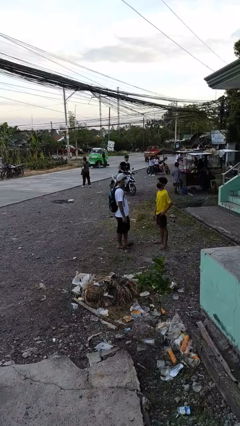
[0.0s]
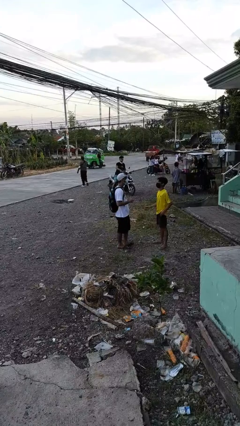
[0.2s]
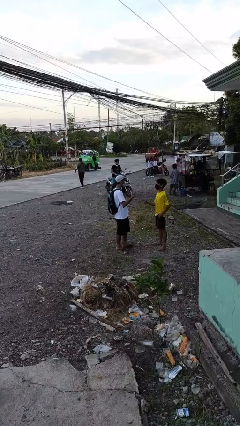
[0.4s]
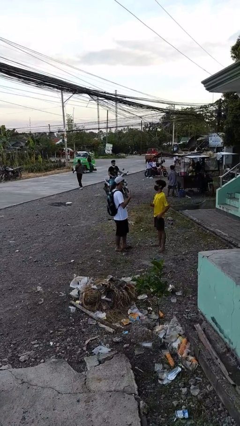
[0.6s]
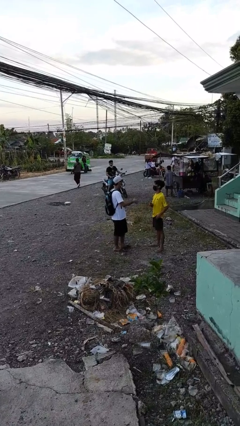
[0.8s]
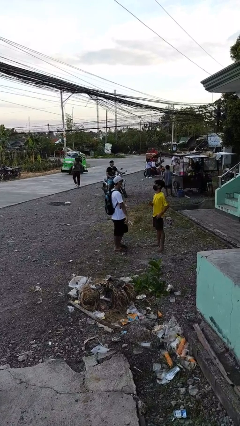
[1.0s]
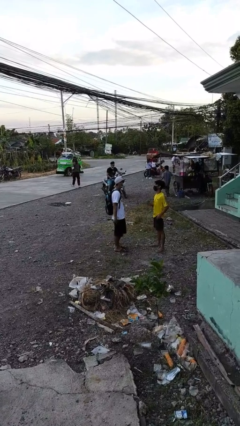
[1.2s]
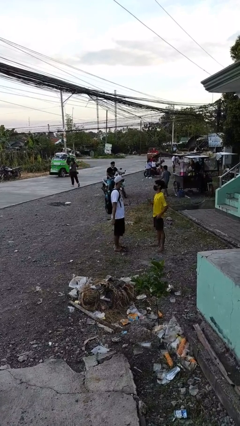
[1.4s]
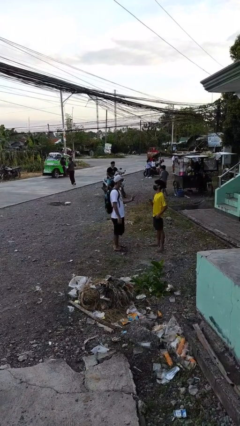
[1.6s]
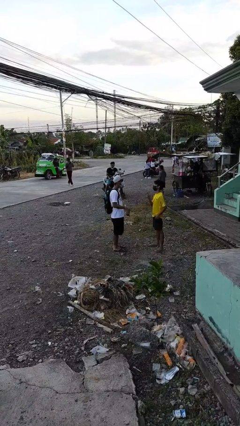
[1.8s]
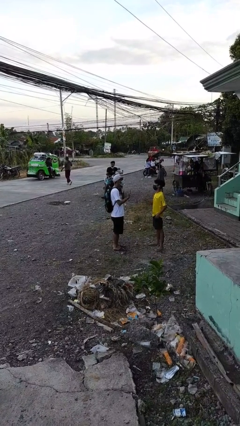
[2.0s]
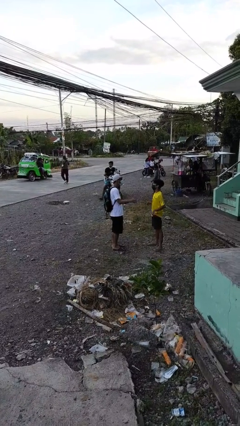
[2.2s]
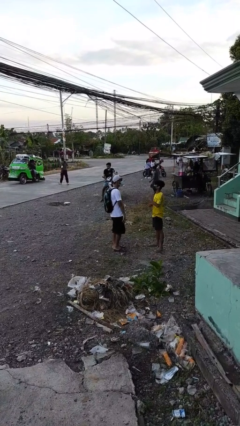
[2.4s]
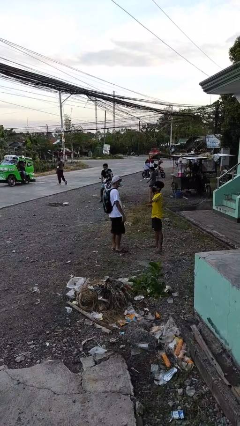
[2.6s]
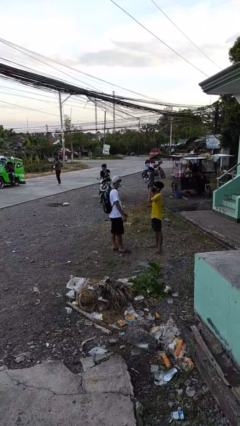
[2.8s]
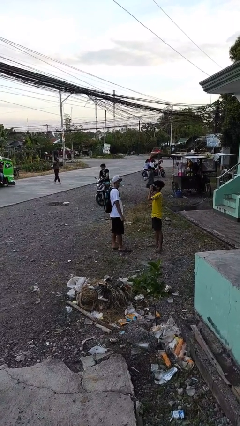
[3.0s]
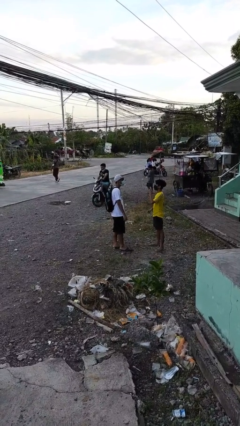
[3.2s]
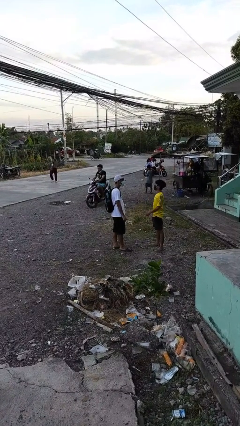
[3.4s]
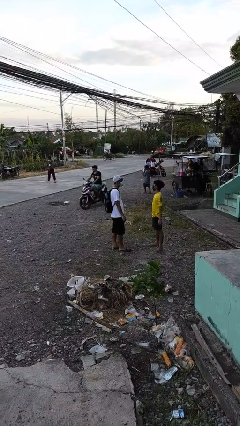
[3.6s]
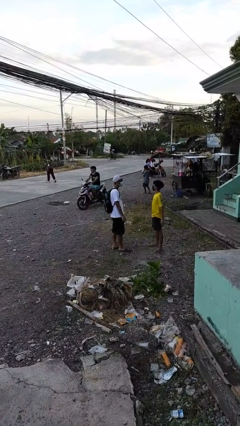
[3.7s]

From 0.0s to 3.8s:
person talks to person

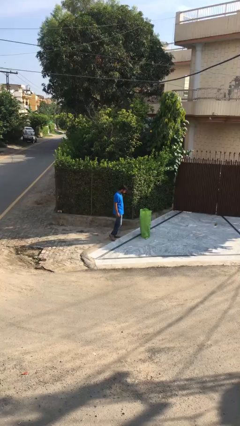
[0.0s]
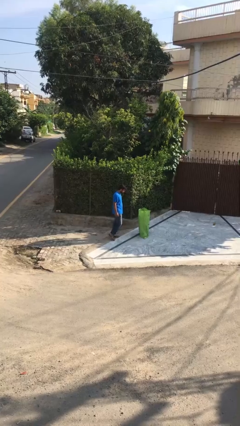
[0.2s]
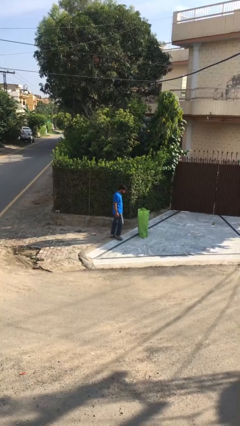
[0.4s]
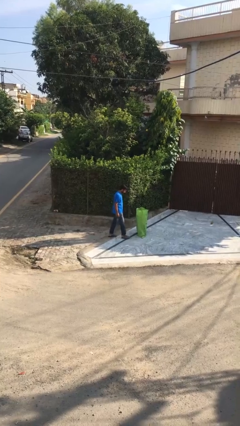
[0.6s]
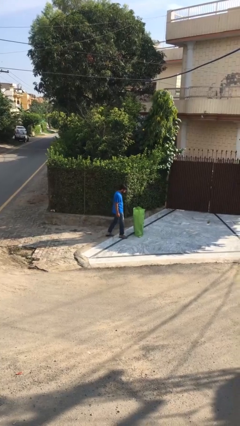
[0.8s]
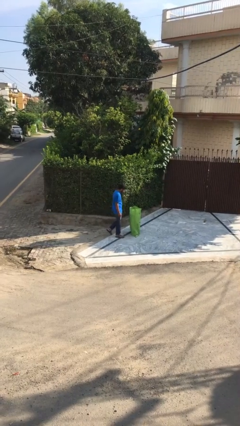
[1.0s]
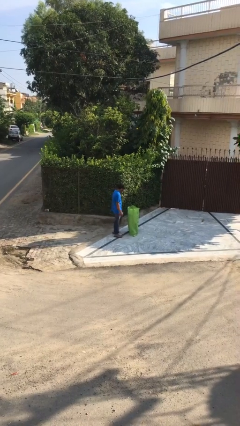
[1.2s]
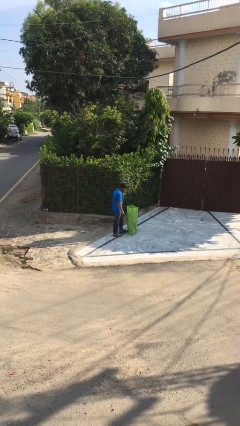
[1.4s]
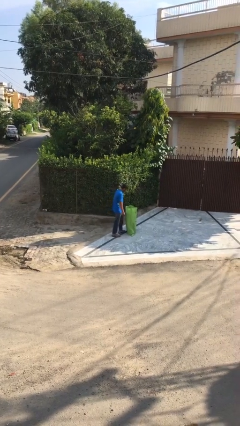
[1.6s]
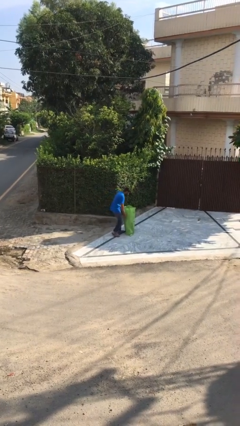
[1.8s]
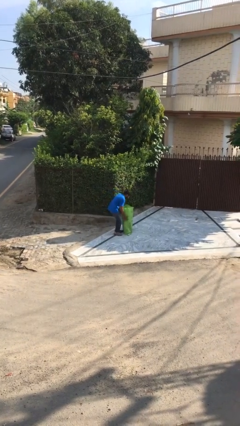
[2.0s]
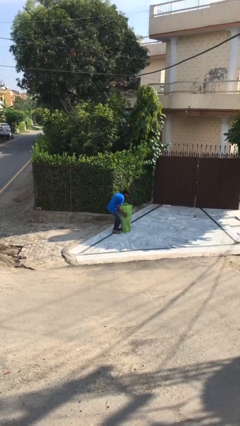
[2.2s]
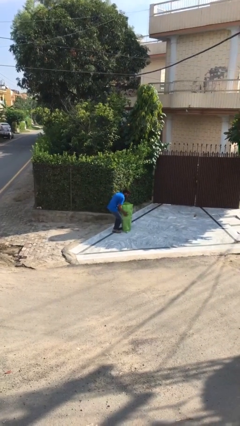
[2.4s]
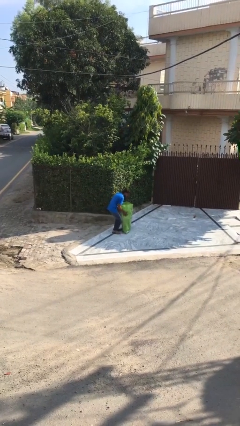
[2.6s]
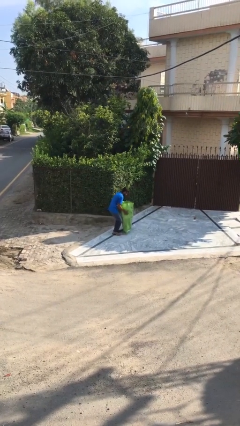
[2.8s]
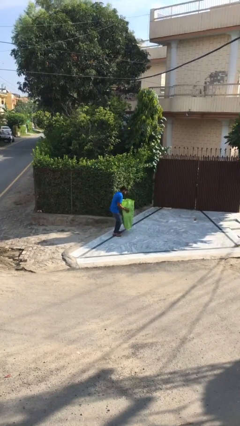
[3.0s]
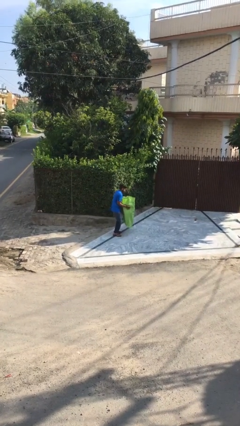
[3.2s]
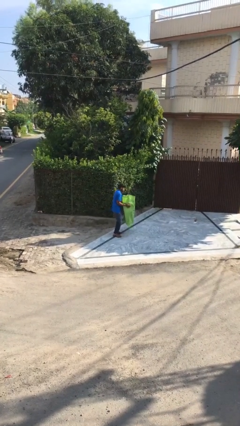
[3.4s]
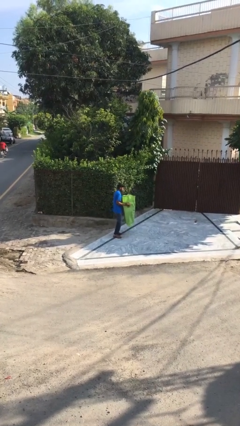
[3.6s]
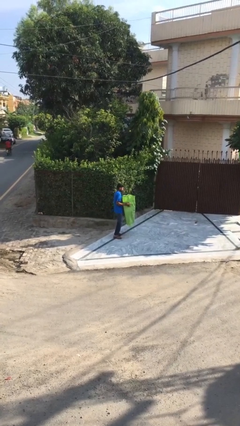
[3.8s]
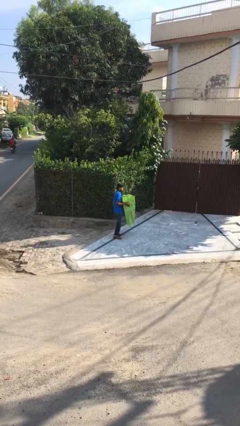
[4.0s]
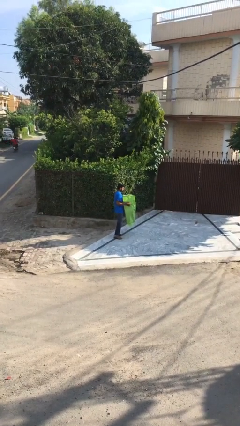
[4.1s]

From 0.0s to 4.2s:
person picks up object from floor

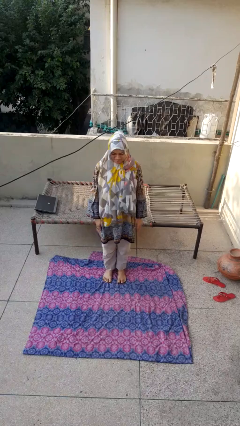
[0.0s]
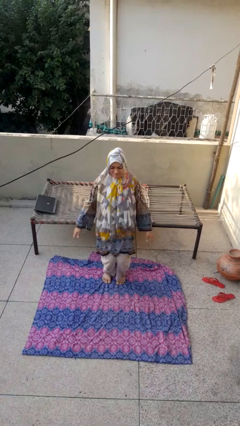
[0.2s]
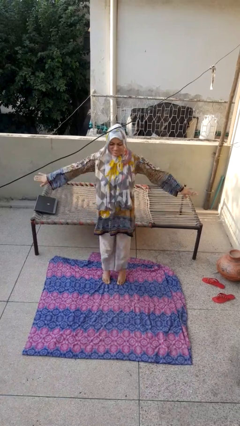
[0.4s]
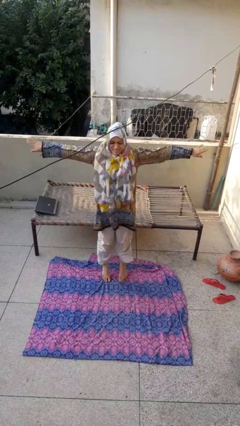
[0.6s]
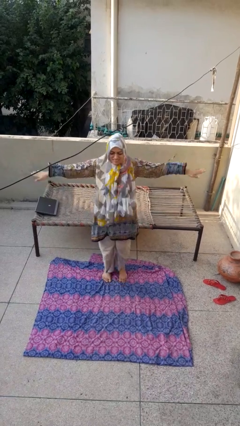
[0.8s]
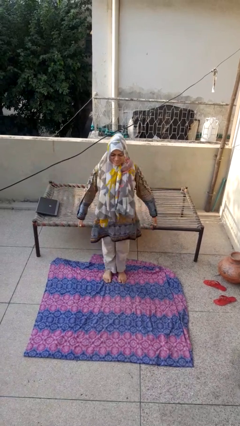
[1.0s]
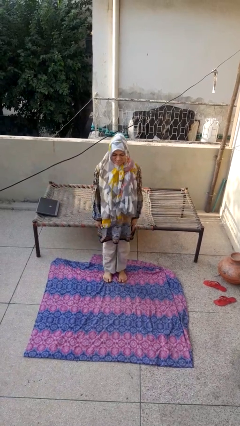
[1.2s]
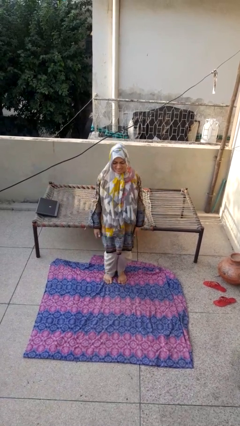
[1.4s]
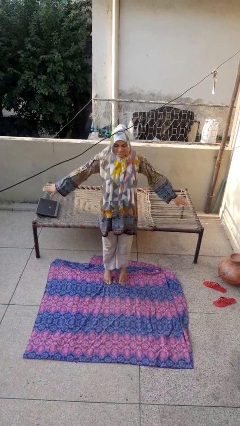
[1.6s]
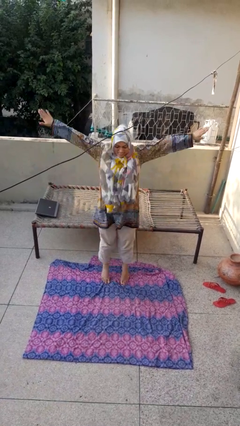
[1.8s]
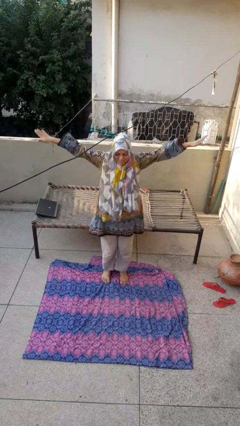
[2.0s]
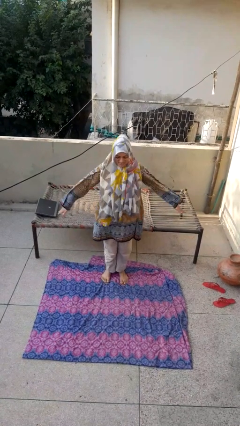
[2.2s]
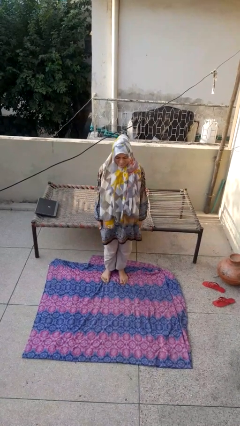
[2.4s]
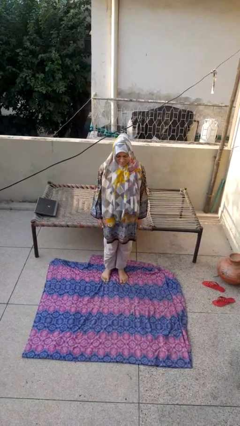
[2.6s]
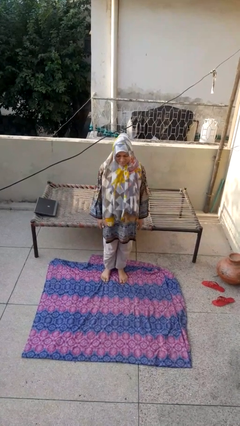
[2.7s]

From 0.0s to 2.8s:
person exercises with jumping jacks

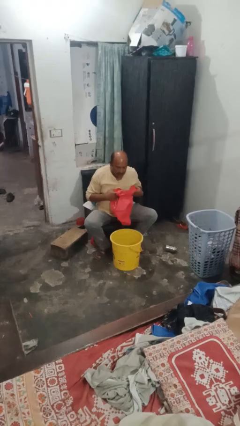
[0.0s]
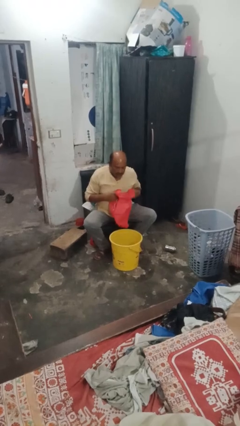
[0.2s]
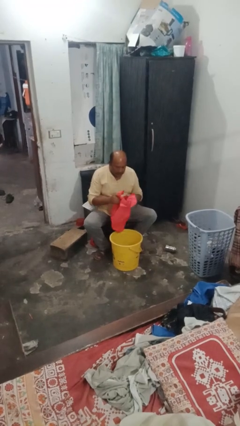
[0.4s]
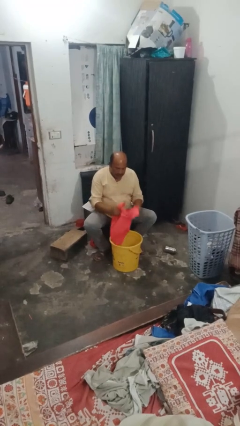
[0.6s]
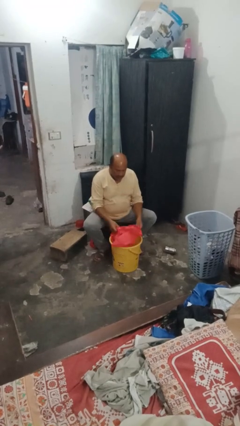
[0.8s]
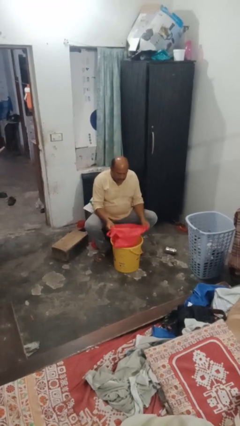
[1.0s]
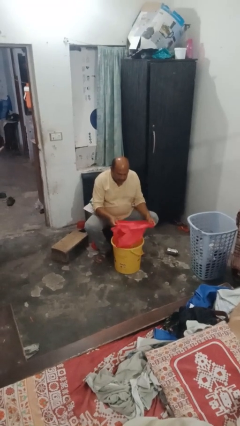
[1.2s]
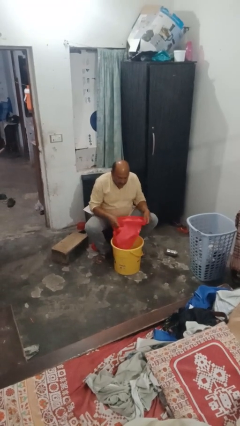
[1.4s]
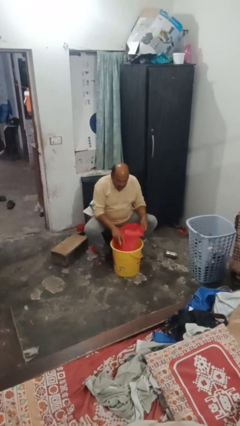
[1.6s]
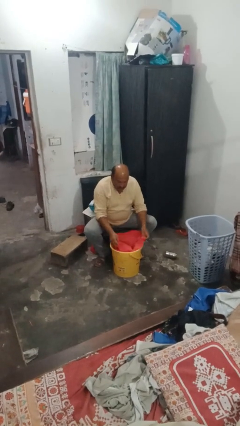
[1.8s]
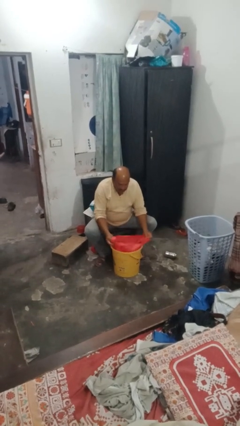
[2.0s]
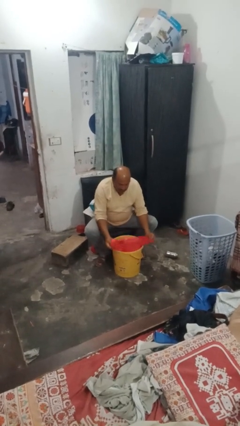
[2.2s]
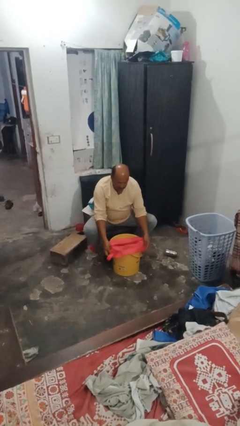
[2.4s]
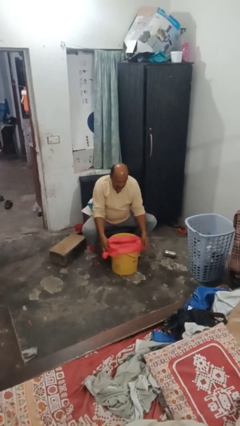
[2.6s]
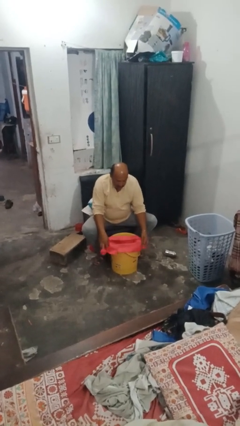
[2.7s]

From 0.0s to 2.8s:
person inserts trashbag into trashcan

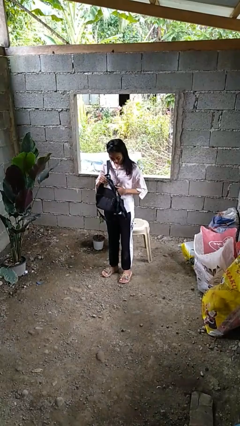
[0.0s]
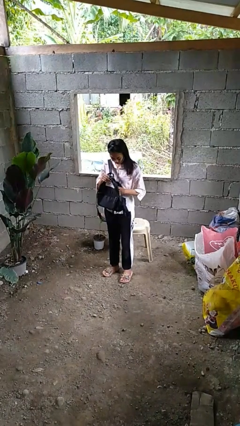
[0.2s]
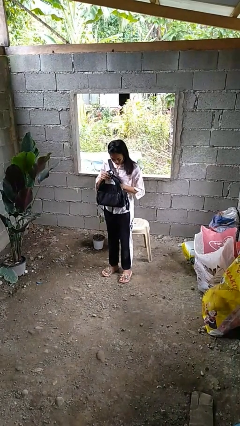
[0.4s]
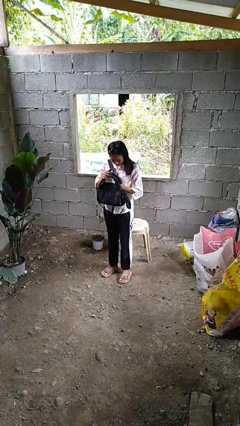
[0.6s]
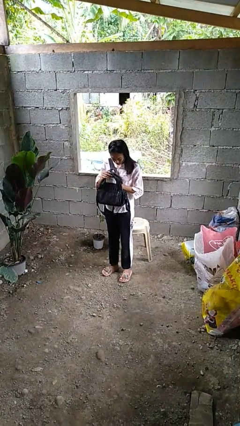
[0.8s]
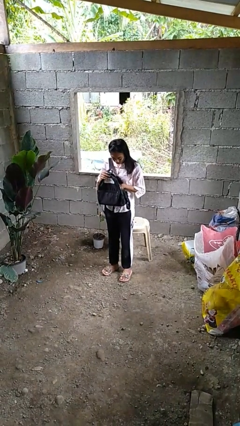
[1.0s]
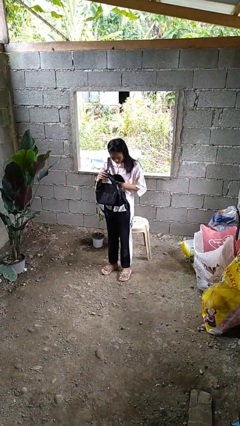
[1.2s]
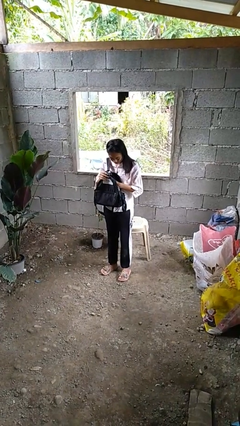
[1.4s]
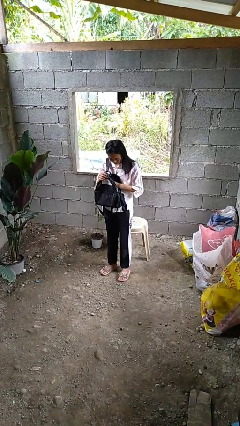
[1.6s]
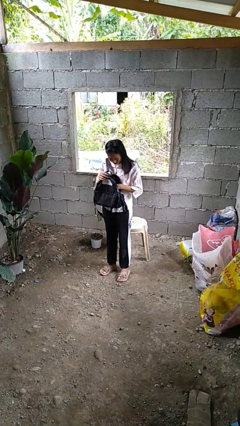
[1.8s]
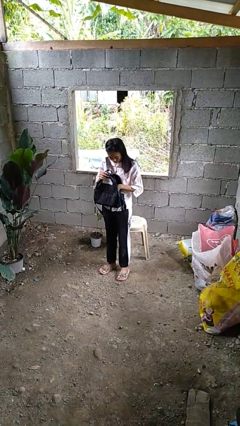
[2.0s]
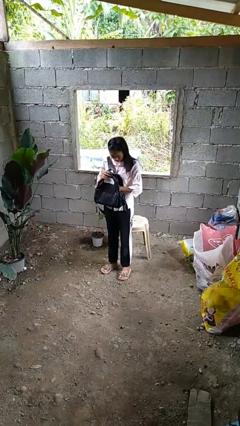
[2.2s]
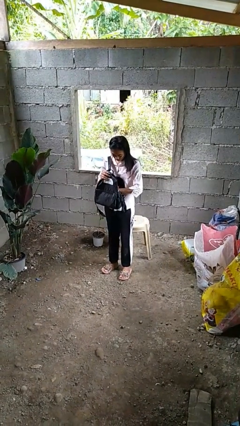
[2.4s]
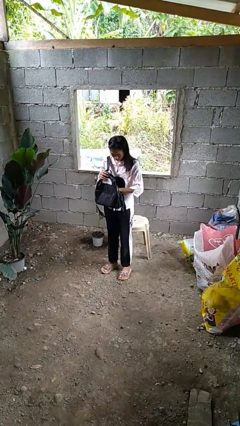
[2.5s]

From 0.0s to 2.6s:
person searches in backpack

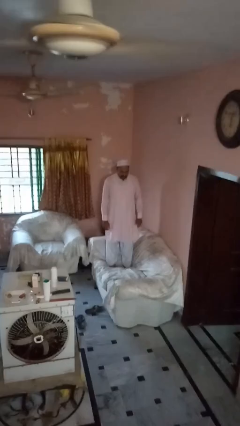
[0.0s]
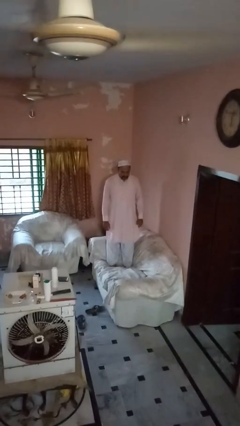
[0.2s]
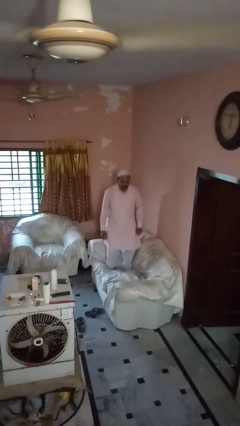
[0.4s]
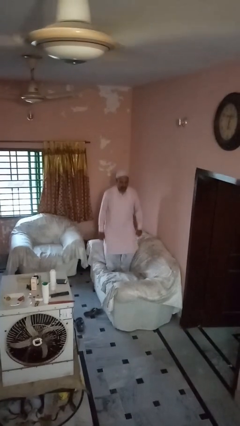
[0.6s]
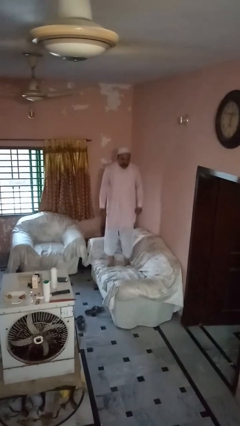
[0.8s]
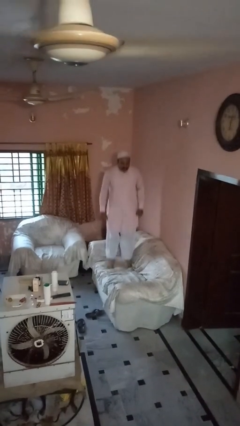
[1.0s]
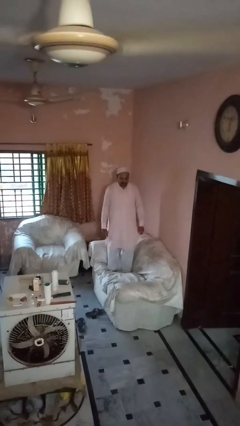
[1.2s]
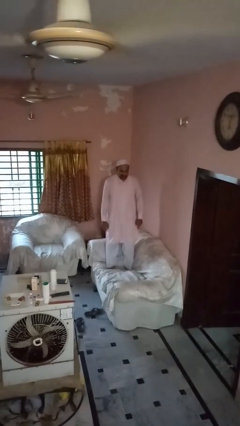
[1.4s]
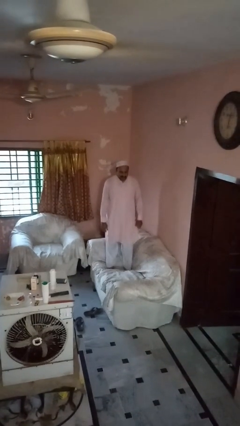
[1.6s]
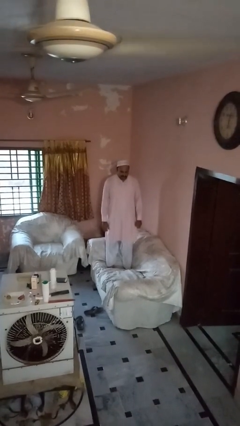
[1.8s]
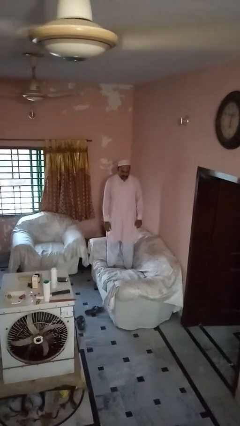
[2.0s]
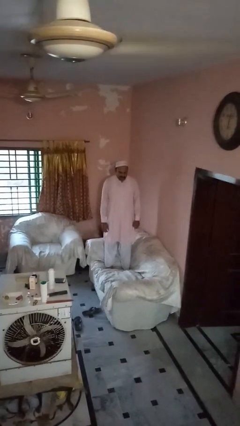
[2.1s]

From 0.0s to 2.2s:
person jumps on couch
